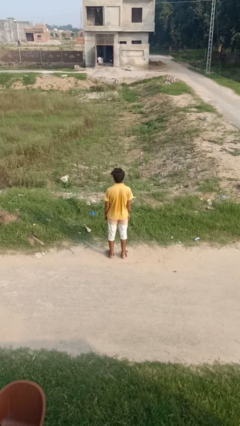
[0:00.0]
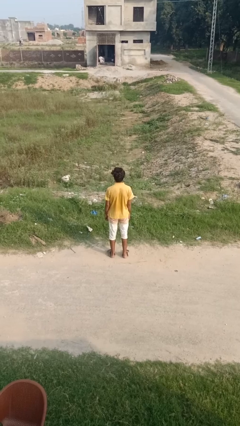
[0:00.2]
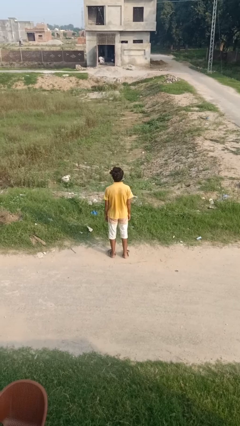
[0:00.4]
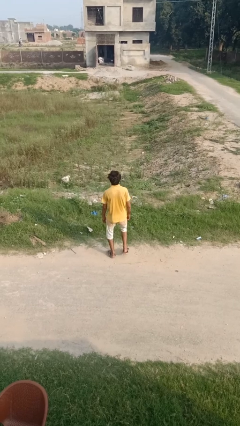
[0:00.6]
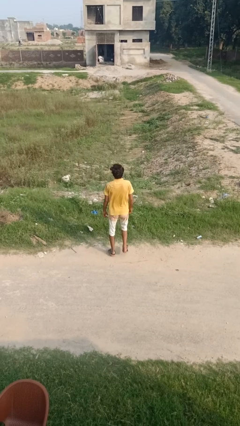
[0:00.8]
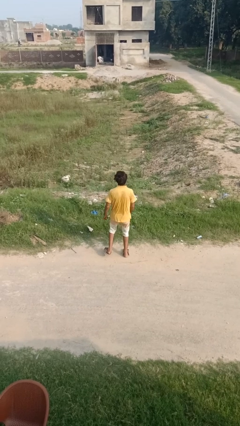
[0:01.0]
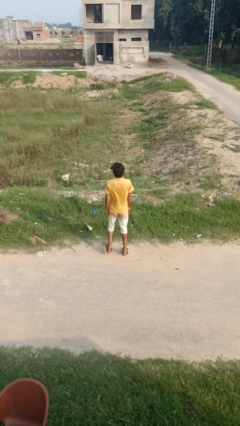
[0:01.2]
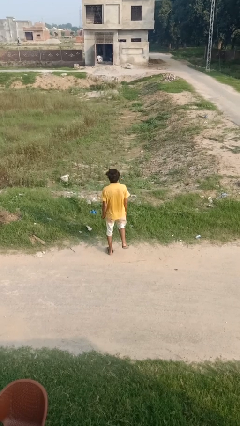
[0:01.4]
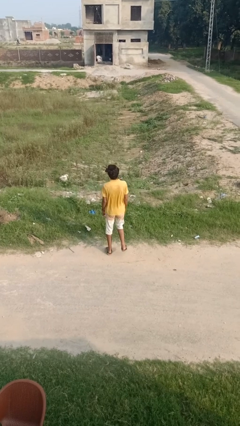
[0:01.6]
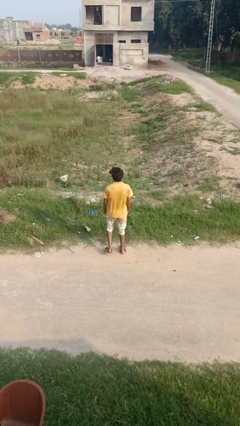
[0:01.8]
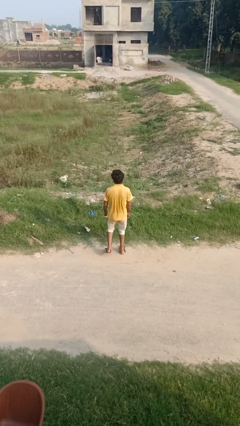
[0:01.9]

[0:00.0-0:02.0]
person dances in place

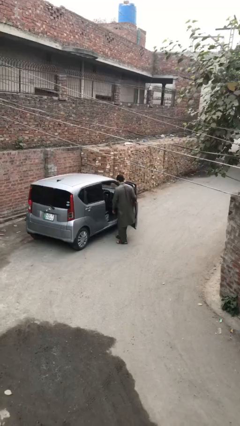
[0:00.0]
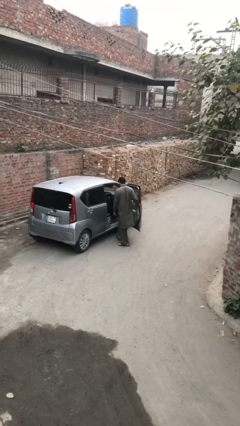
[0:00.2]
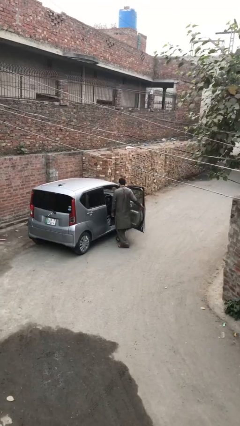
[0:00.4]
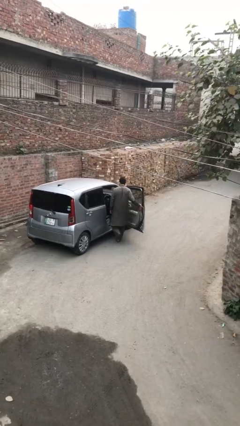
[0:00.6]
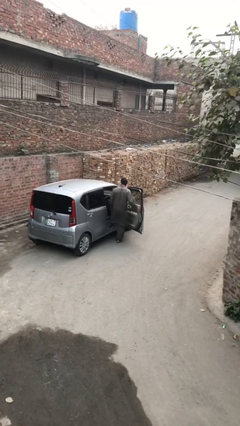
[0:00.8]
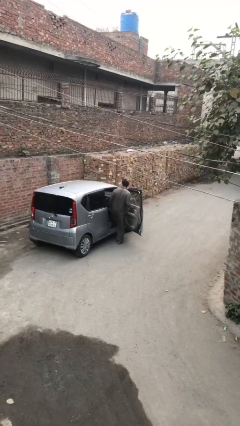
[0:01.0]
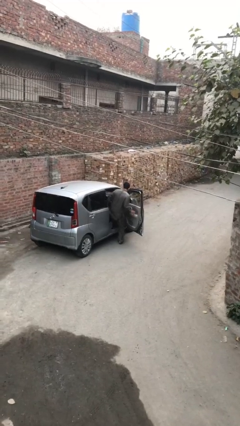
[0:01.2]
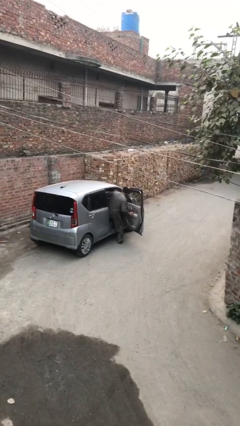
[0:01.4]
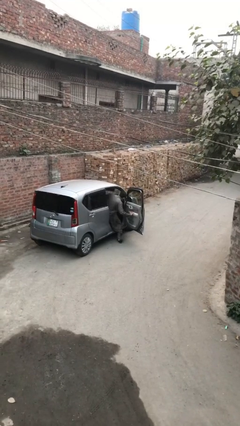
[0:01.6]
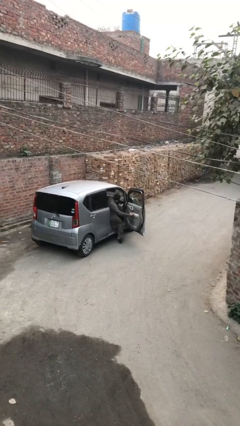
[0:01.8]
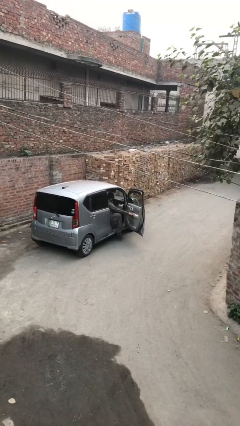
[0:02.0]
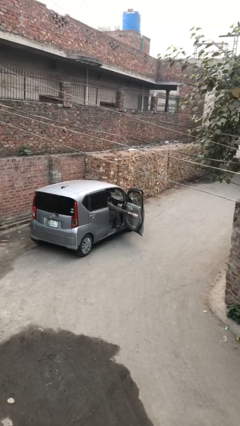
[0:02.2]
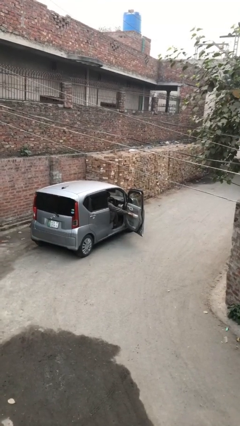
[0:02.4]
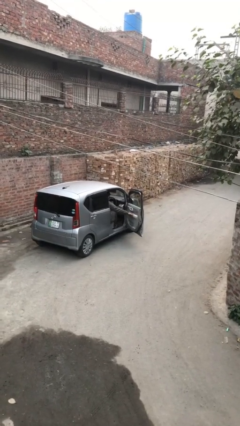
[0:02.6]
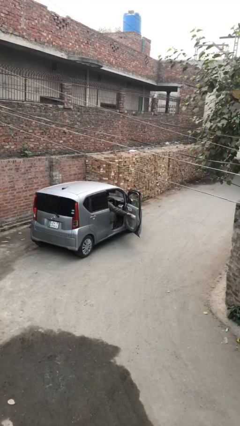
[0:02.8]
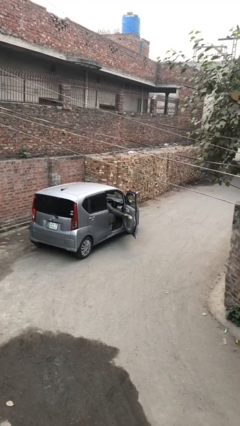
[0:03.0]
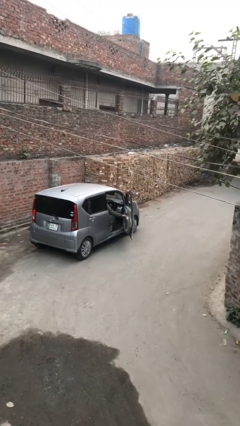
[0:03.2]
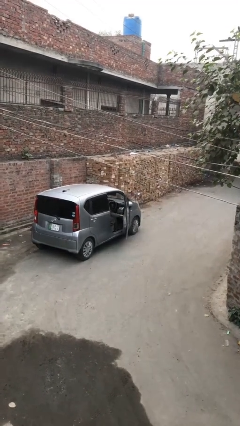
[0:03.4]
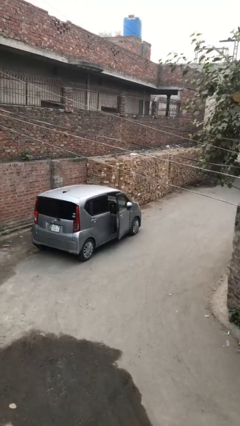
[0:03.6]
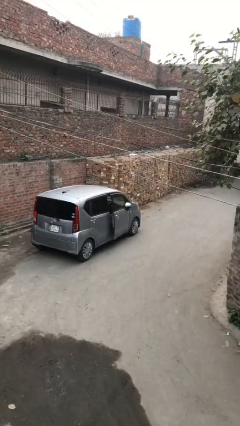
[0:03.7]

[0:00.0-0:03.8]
person enters car

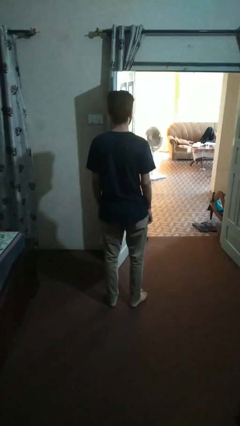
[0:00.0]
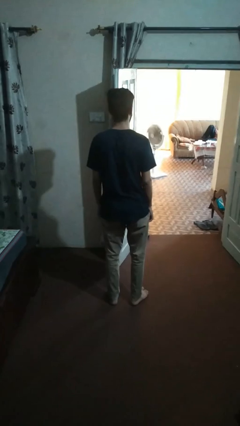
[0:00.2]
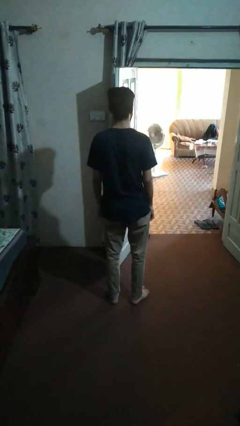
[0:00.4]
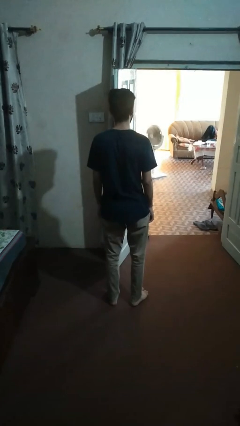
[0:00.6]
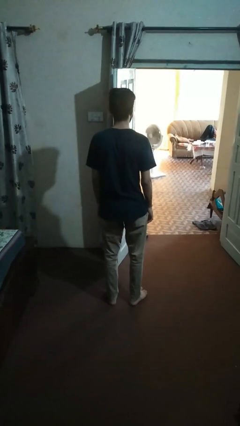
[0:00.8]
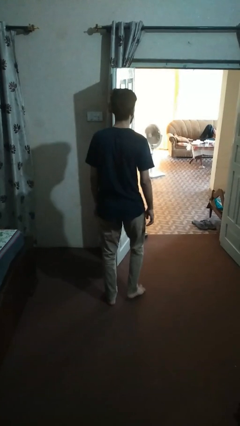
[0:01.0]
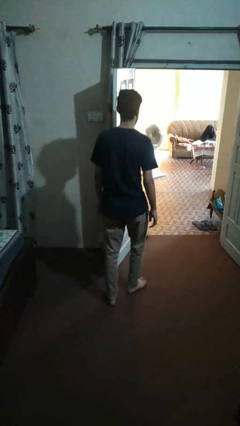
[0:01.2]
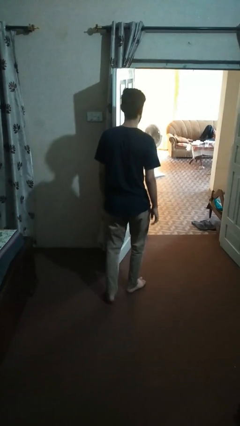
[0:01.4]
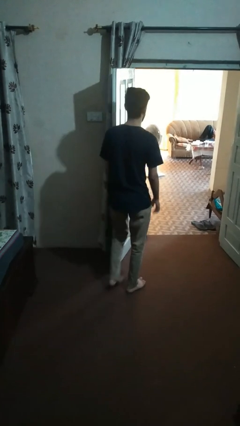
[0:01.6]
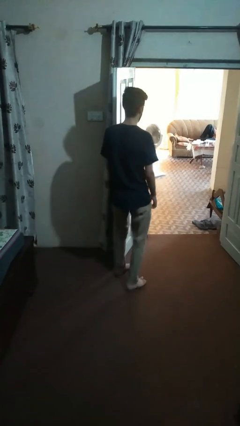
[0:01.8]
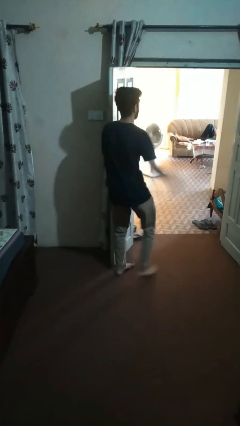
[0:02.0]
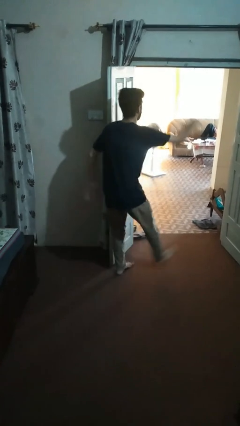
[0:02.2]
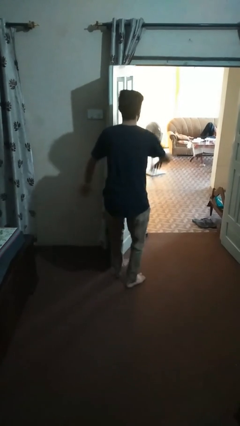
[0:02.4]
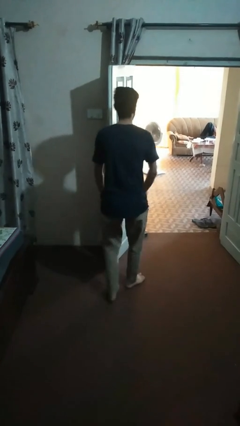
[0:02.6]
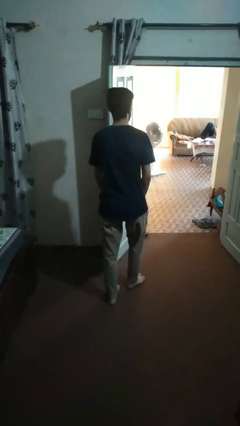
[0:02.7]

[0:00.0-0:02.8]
person bumps into wall

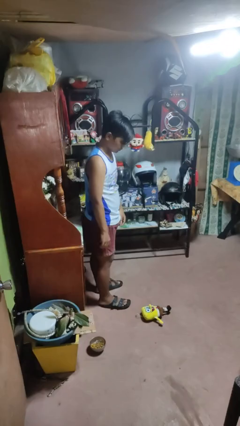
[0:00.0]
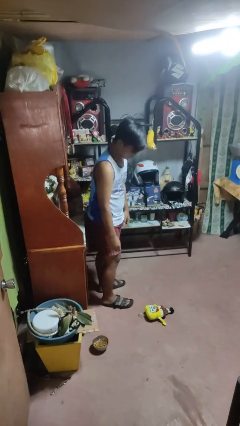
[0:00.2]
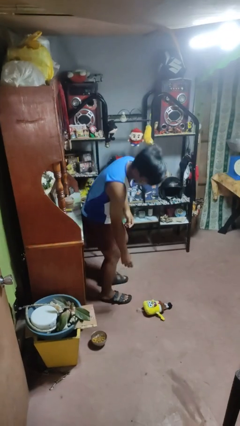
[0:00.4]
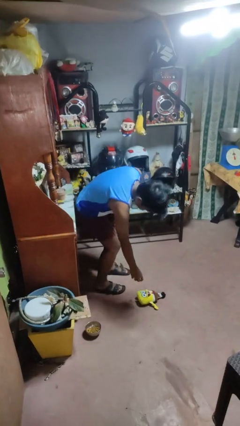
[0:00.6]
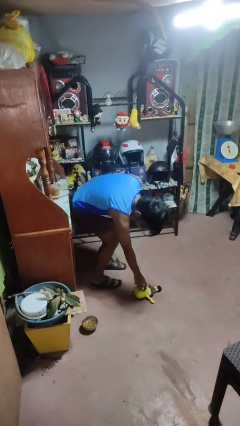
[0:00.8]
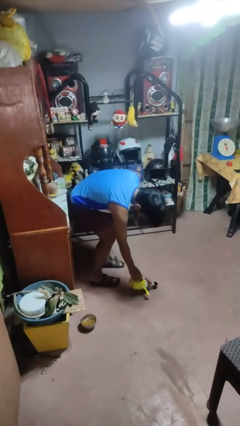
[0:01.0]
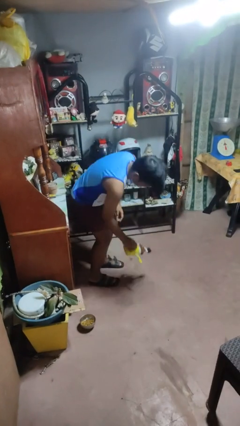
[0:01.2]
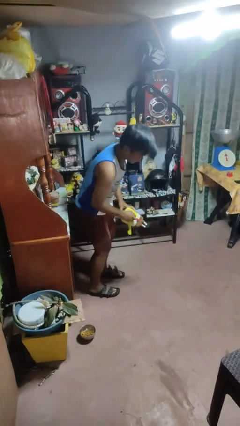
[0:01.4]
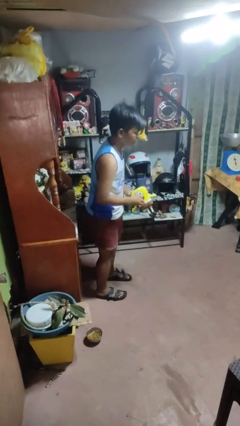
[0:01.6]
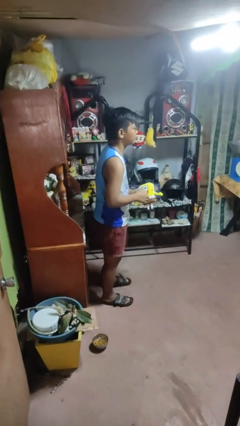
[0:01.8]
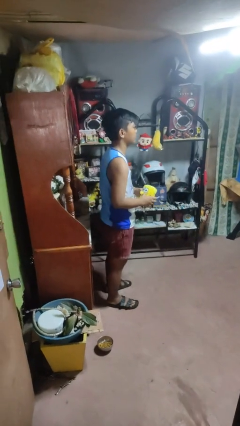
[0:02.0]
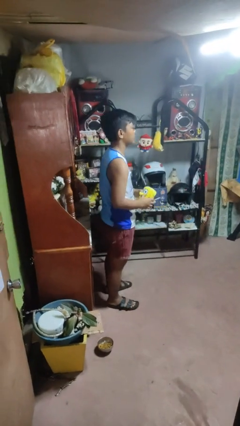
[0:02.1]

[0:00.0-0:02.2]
person picks up object from floor

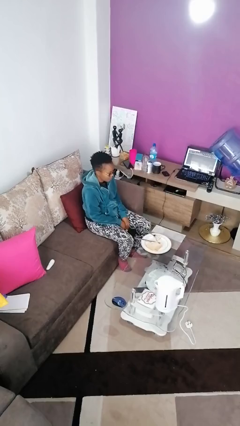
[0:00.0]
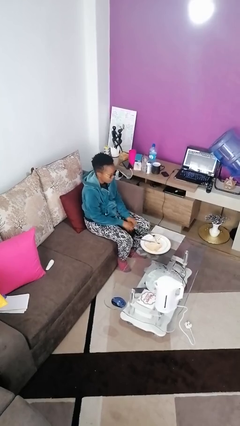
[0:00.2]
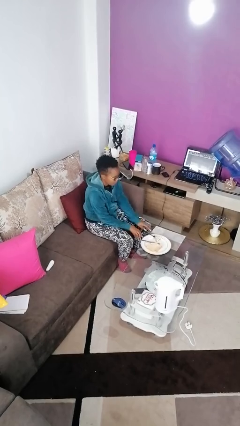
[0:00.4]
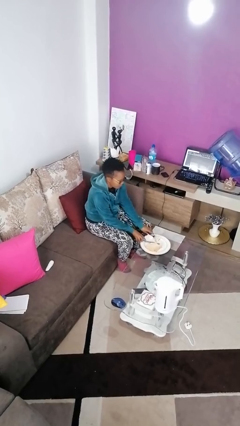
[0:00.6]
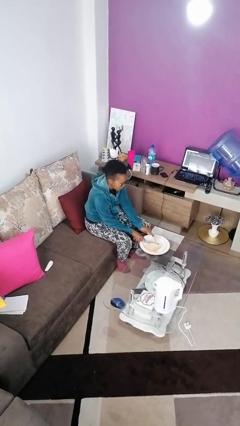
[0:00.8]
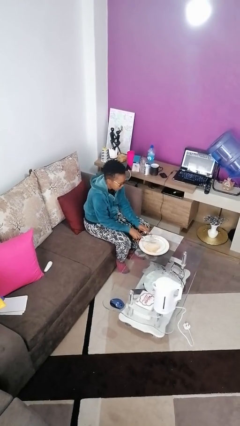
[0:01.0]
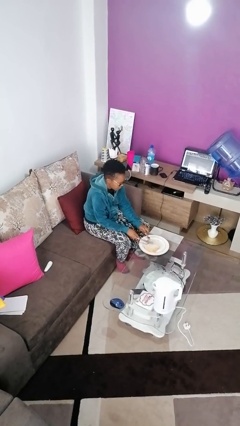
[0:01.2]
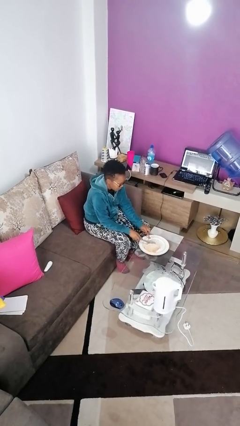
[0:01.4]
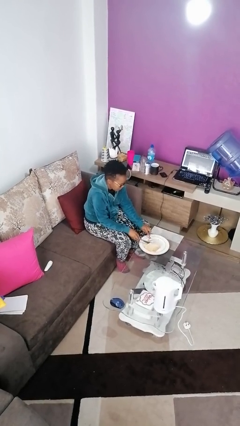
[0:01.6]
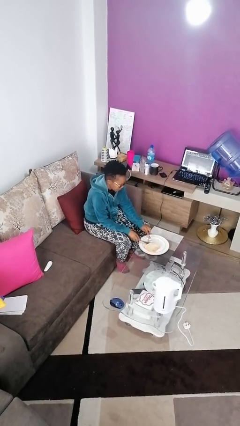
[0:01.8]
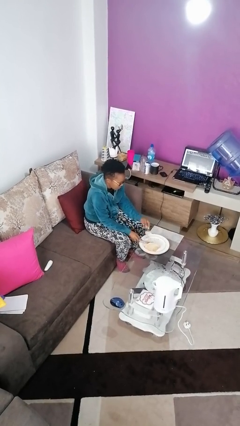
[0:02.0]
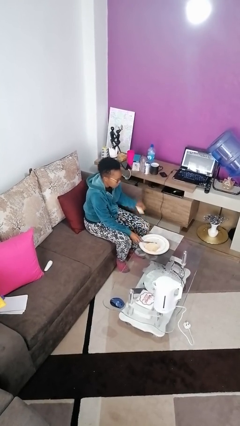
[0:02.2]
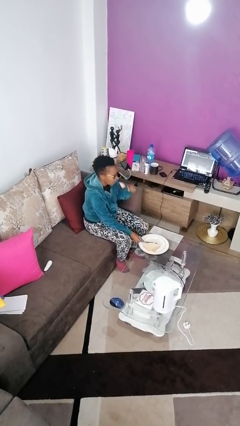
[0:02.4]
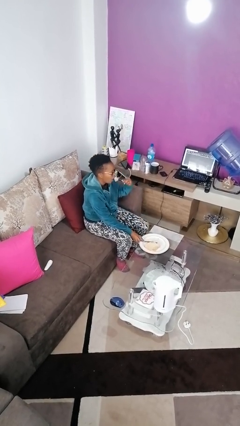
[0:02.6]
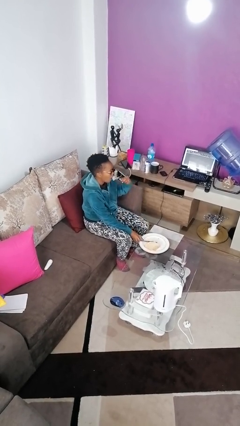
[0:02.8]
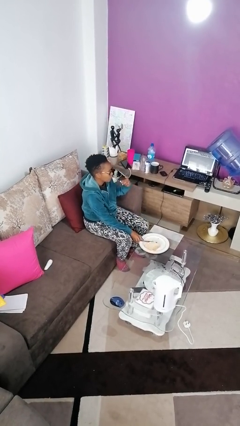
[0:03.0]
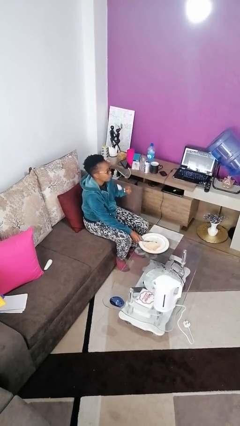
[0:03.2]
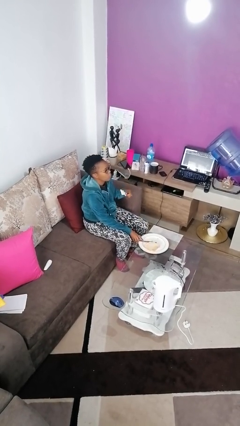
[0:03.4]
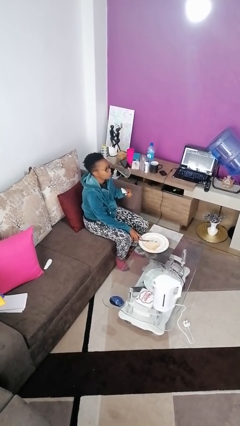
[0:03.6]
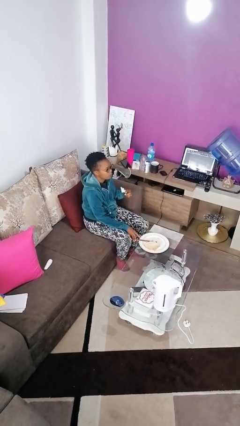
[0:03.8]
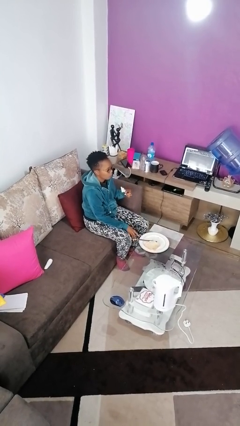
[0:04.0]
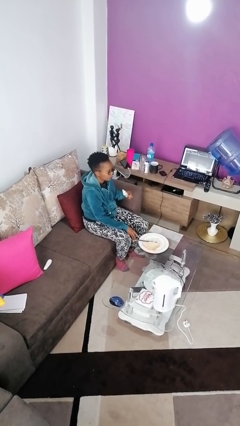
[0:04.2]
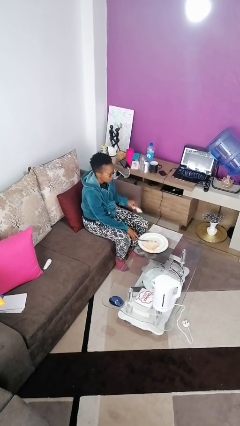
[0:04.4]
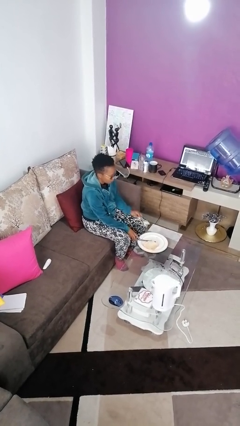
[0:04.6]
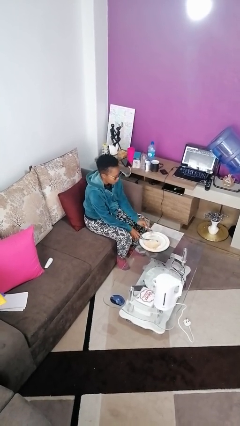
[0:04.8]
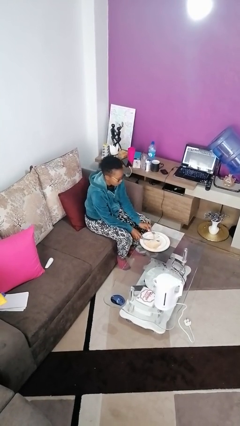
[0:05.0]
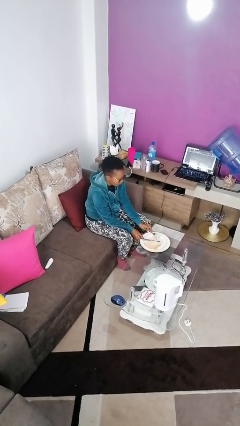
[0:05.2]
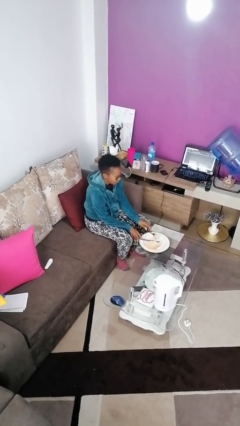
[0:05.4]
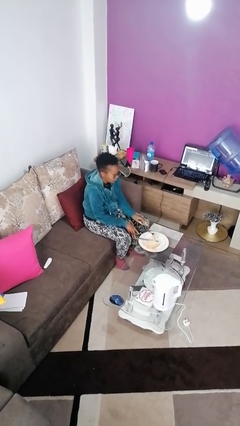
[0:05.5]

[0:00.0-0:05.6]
person eats with utensil

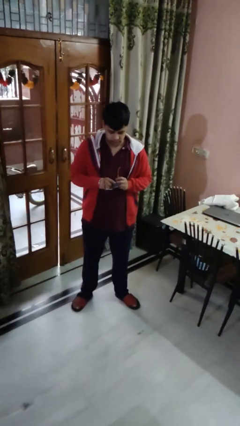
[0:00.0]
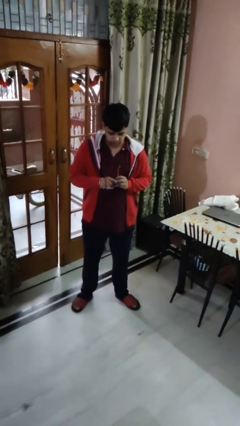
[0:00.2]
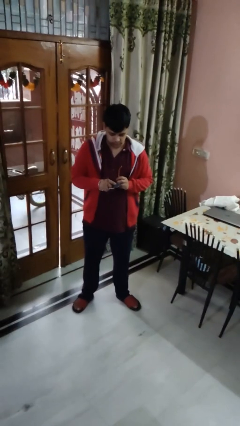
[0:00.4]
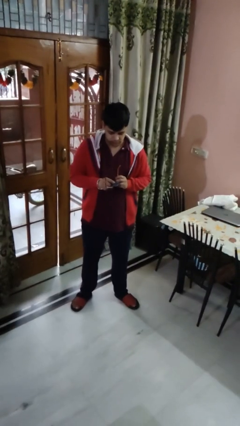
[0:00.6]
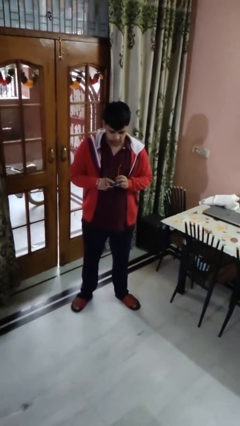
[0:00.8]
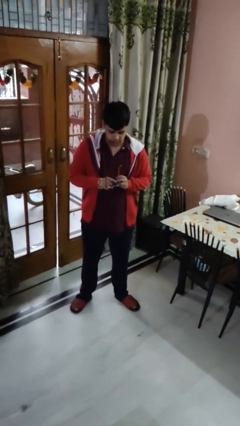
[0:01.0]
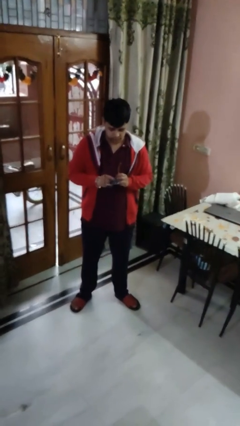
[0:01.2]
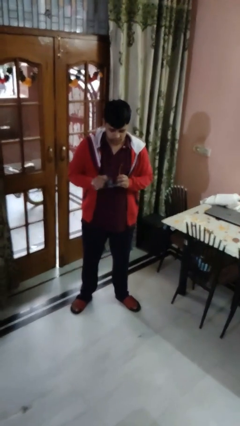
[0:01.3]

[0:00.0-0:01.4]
person cleans eyeglasses
